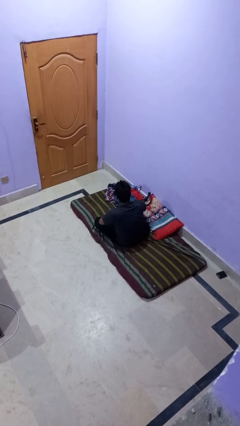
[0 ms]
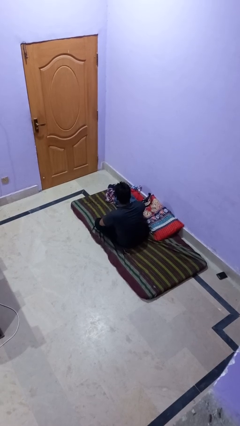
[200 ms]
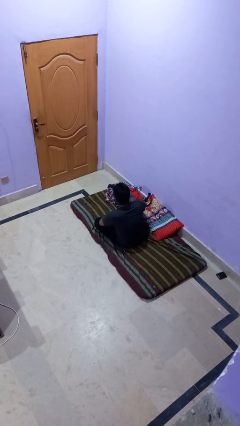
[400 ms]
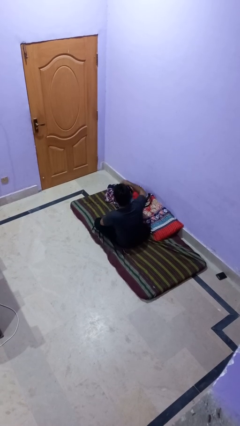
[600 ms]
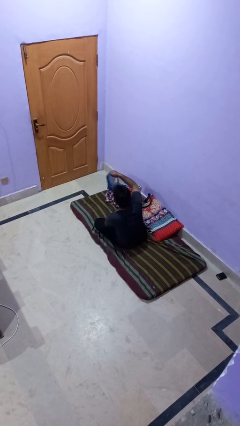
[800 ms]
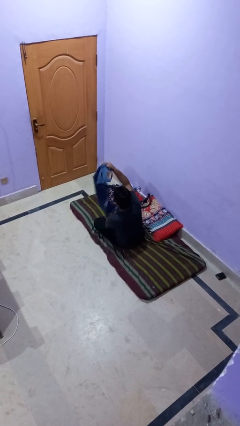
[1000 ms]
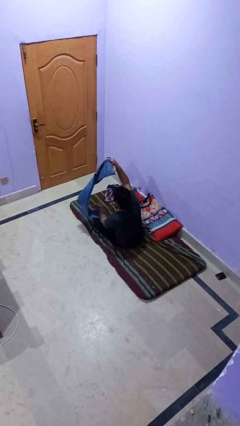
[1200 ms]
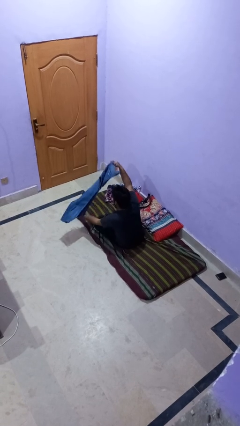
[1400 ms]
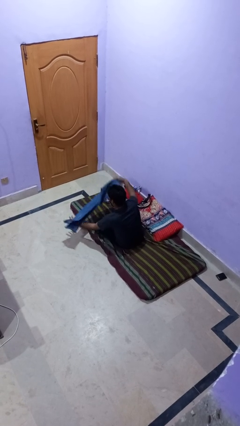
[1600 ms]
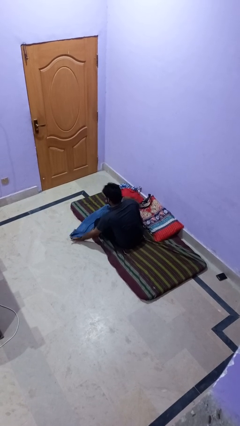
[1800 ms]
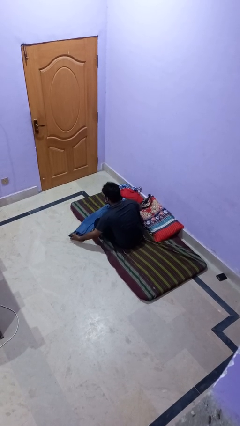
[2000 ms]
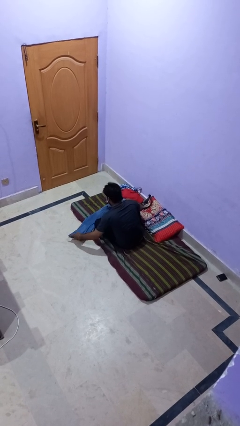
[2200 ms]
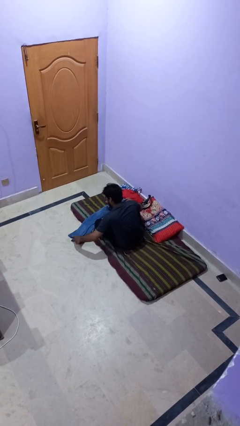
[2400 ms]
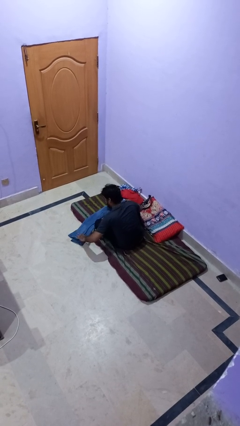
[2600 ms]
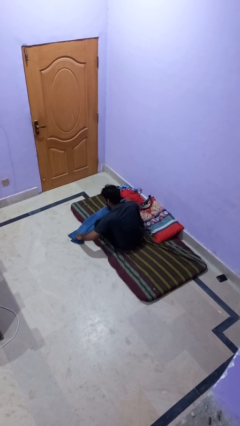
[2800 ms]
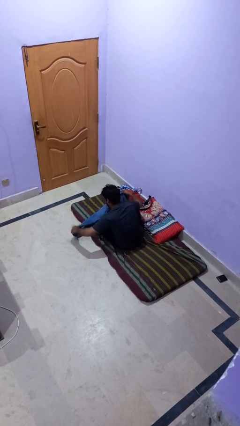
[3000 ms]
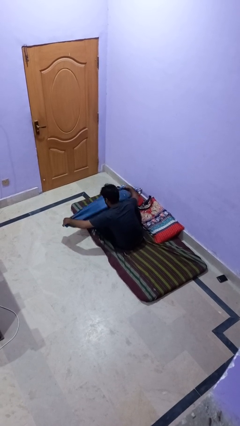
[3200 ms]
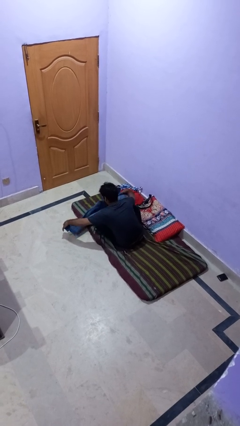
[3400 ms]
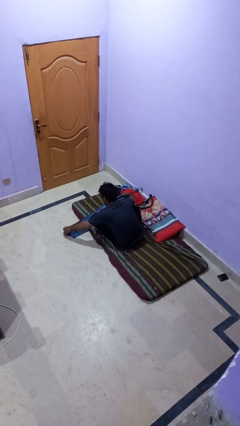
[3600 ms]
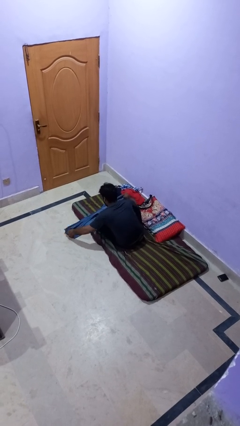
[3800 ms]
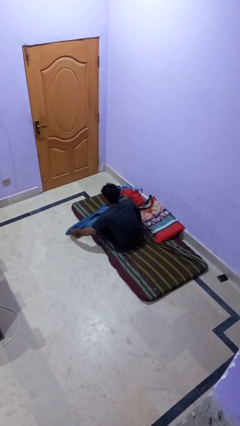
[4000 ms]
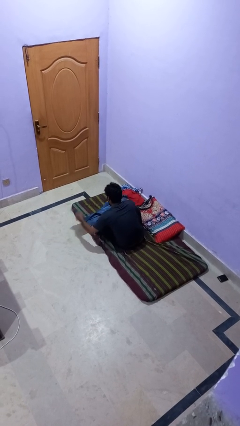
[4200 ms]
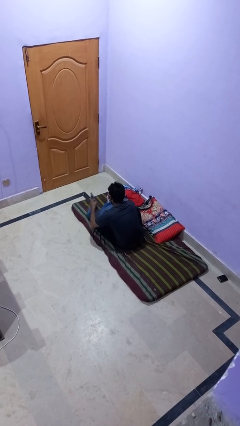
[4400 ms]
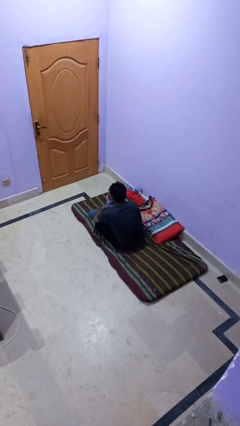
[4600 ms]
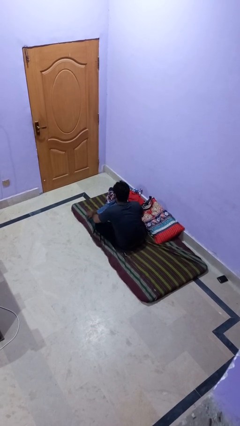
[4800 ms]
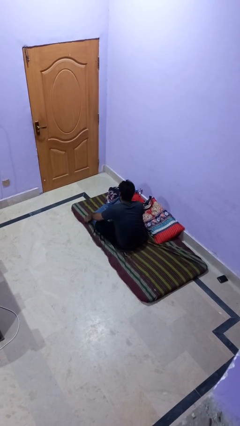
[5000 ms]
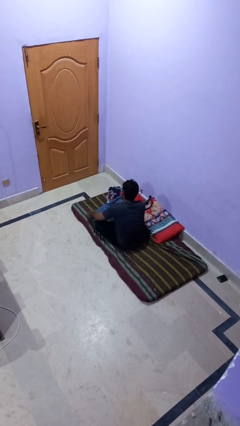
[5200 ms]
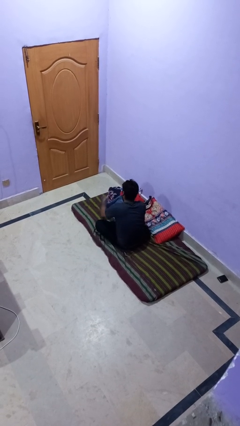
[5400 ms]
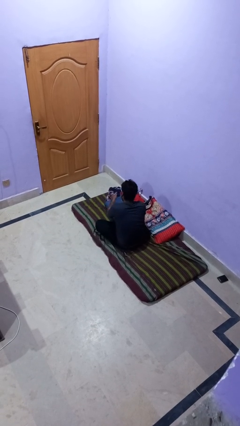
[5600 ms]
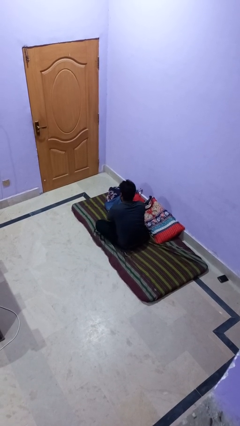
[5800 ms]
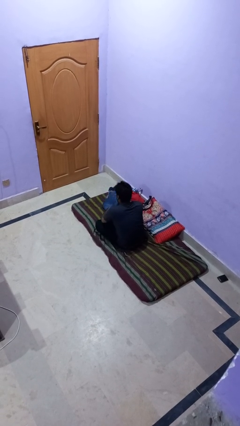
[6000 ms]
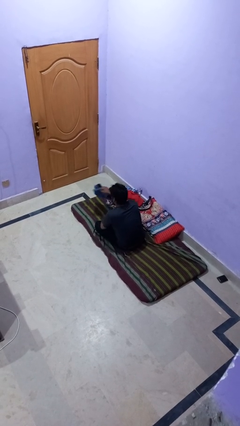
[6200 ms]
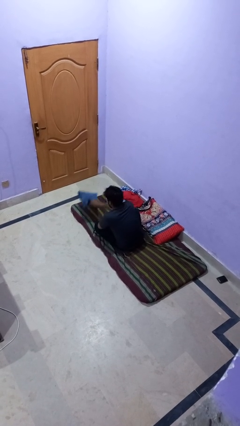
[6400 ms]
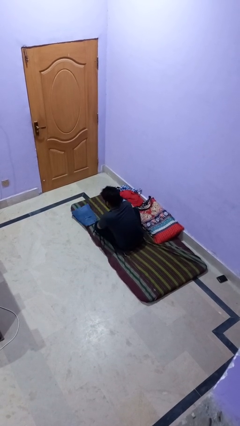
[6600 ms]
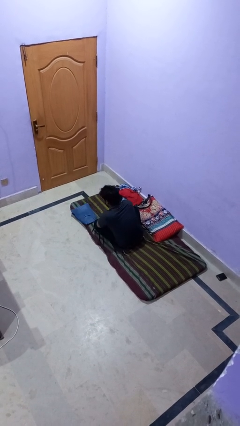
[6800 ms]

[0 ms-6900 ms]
person folds pants

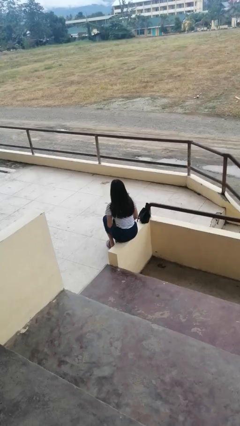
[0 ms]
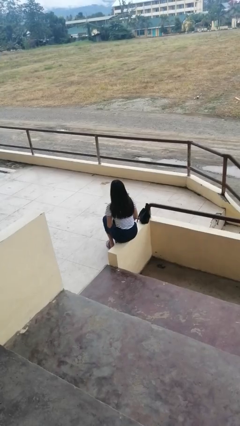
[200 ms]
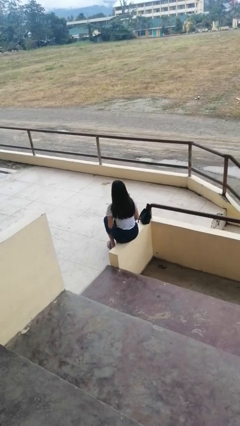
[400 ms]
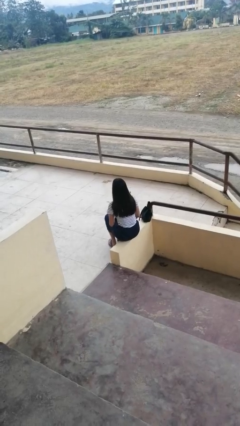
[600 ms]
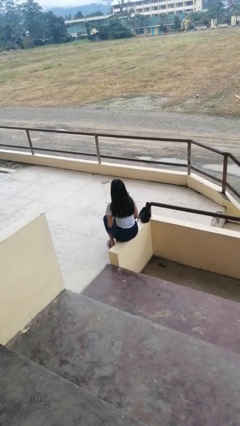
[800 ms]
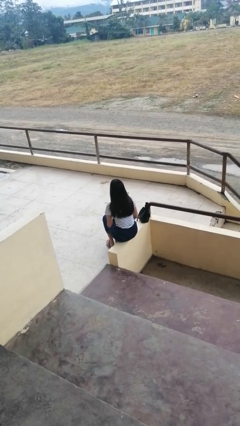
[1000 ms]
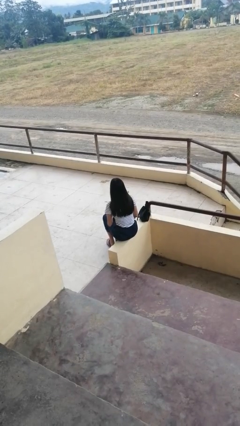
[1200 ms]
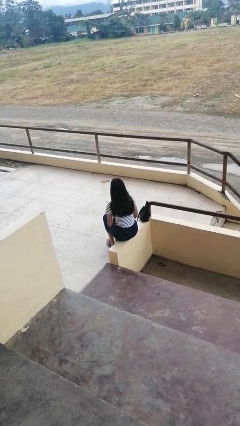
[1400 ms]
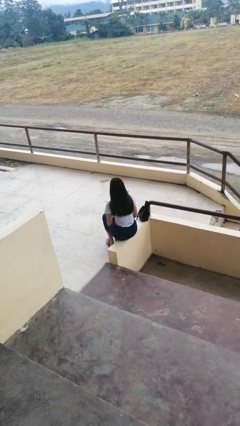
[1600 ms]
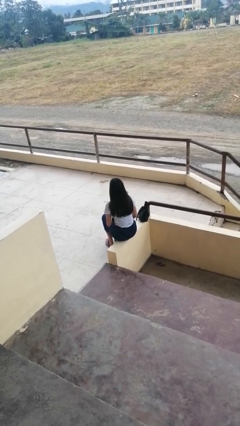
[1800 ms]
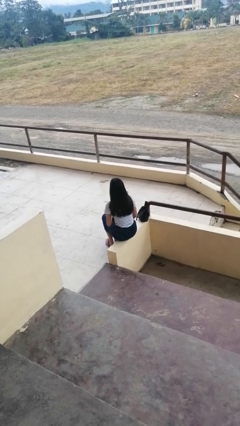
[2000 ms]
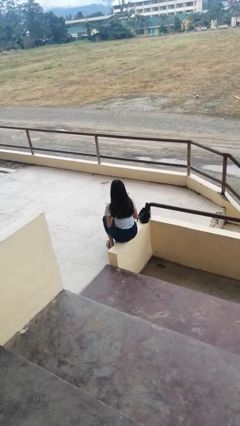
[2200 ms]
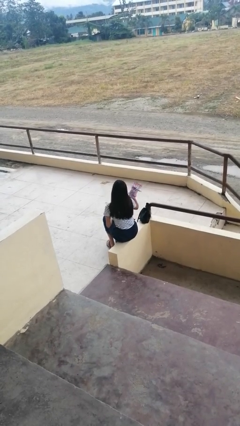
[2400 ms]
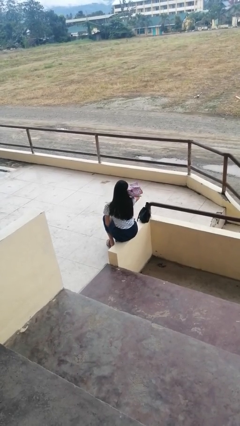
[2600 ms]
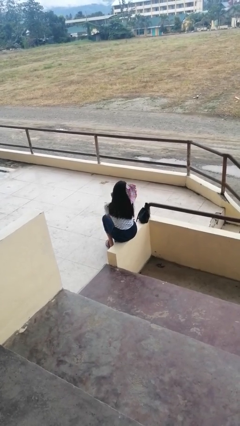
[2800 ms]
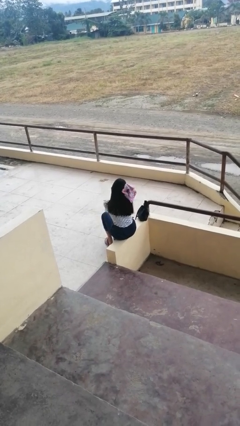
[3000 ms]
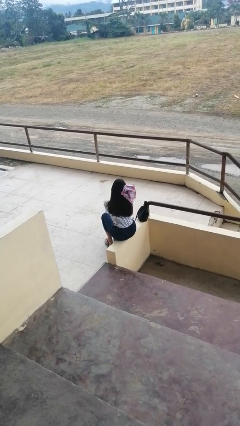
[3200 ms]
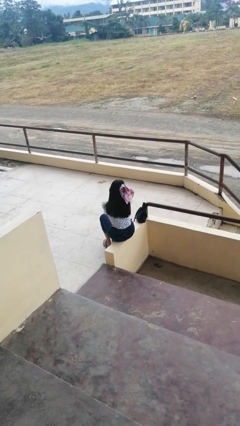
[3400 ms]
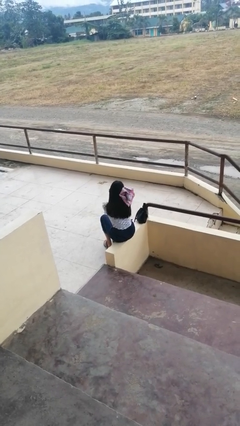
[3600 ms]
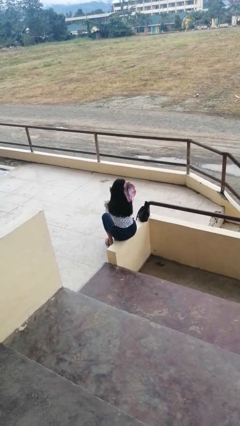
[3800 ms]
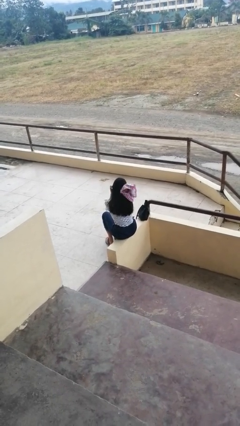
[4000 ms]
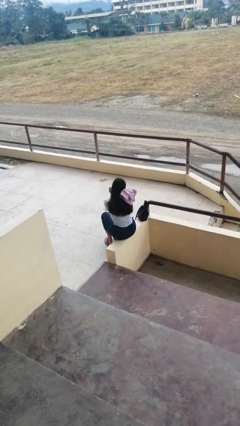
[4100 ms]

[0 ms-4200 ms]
person dries hair with towel

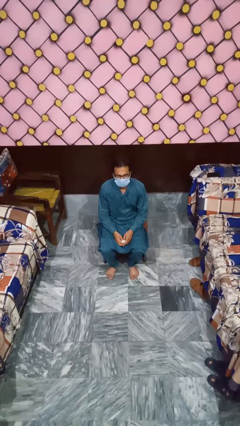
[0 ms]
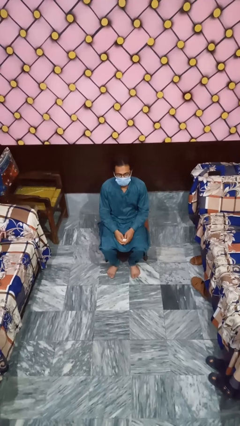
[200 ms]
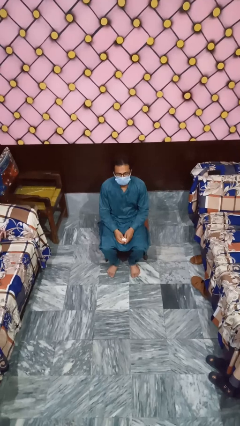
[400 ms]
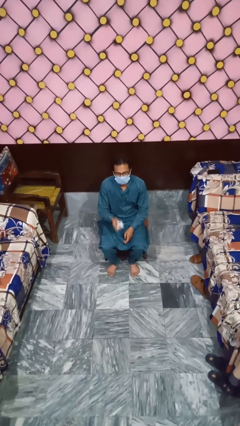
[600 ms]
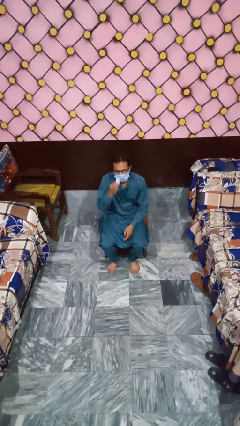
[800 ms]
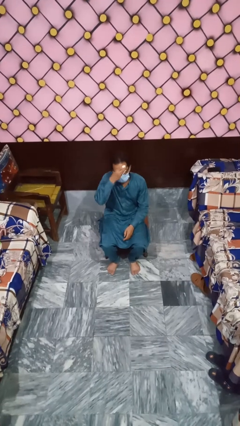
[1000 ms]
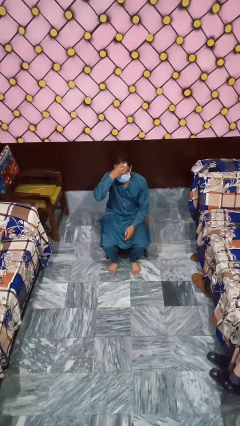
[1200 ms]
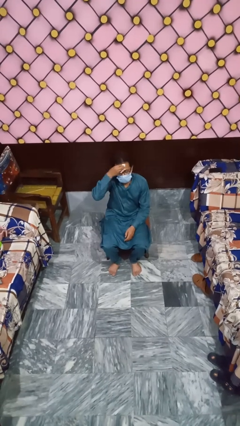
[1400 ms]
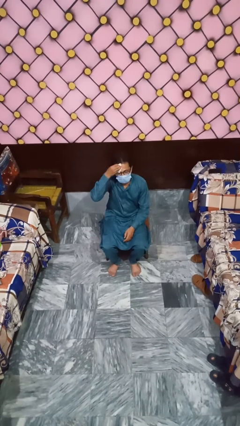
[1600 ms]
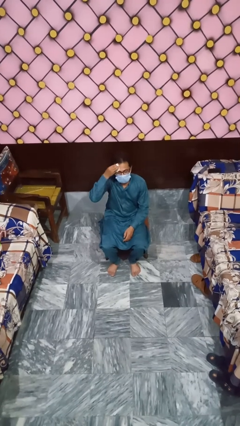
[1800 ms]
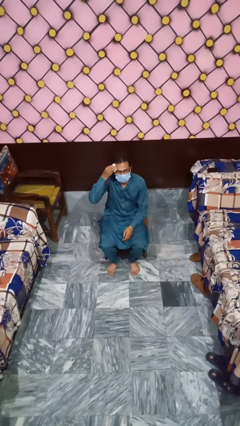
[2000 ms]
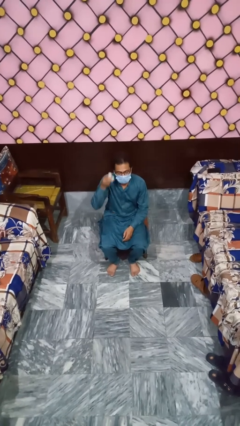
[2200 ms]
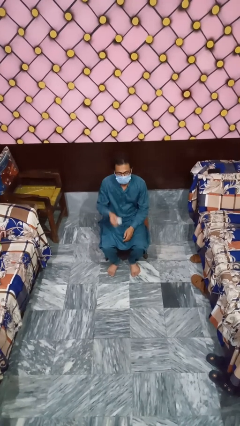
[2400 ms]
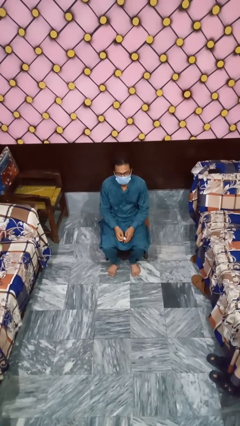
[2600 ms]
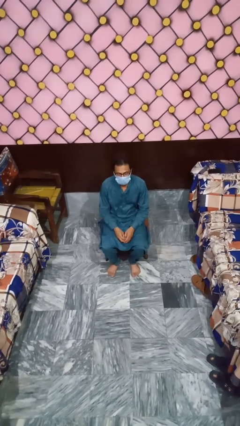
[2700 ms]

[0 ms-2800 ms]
person wipes mouth with napkin

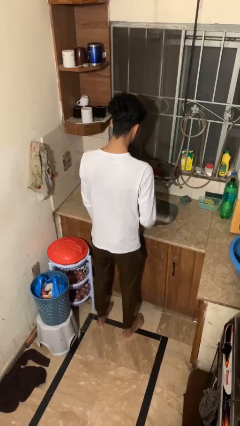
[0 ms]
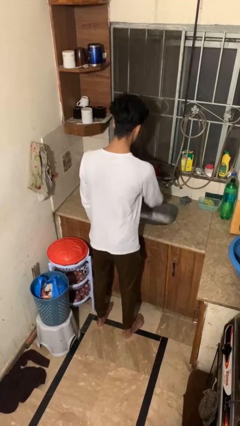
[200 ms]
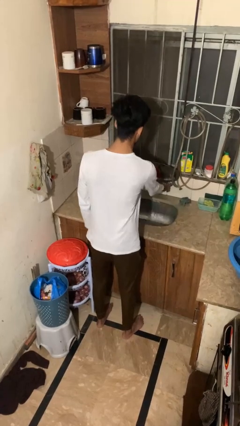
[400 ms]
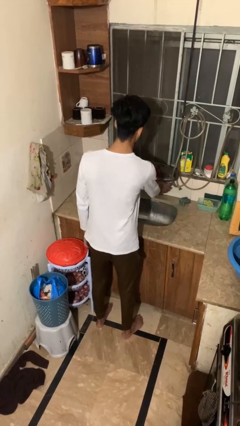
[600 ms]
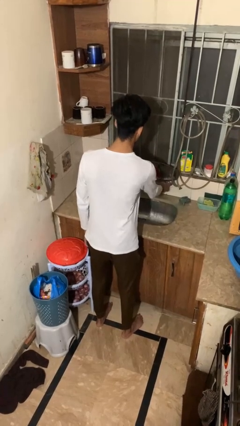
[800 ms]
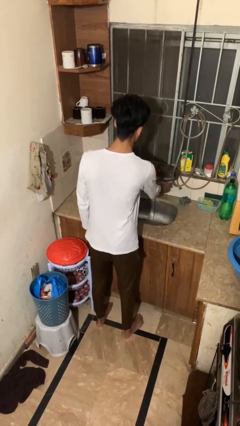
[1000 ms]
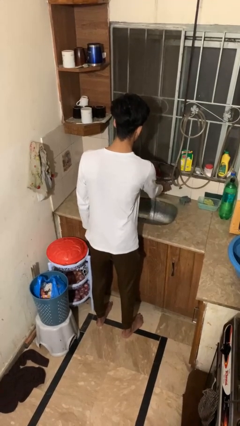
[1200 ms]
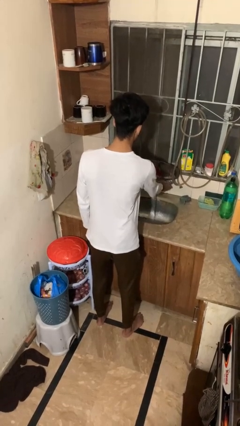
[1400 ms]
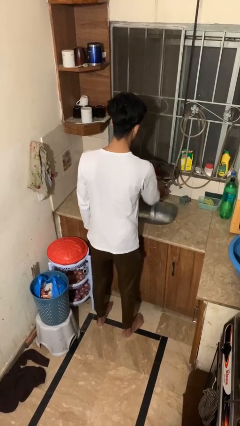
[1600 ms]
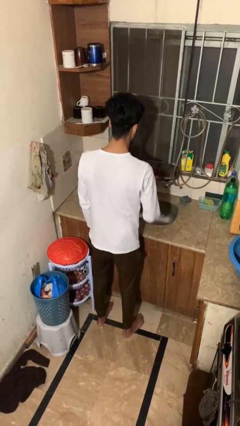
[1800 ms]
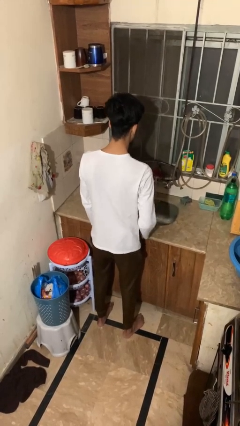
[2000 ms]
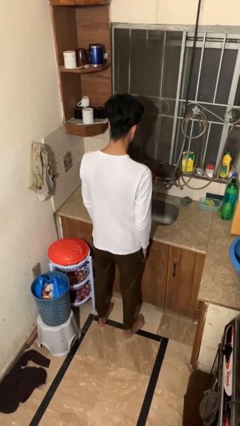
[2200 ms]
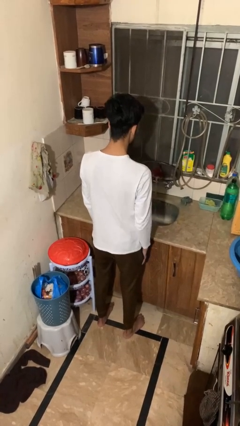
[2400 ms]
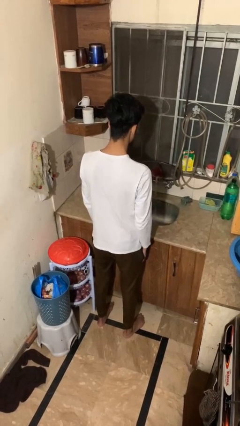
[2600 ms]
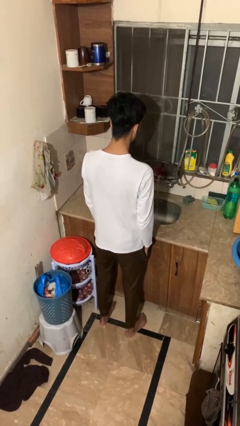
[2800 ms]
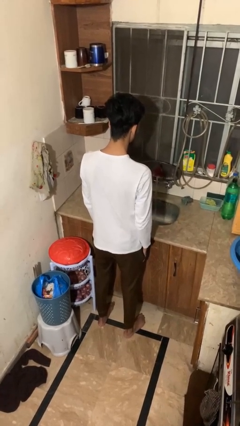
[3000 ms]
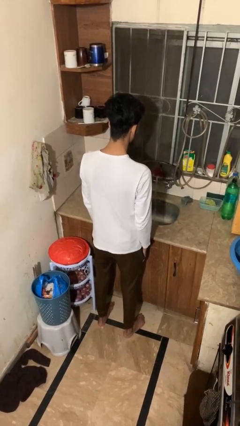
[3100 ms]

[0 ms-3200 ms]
person turns on faucet

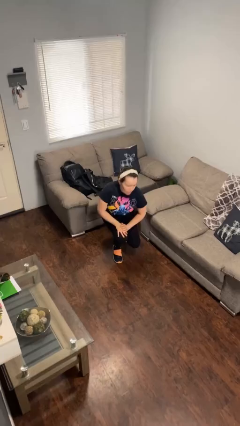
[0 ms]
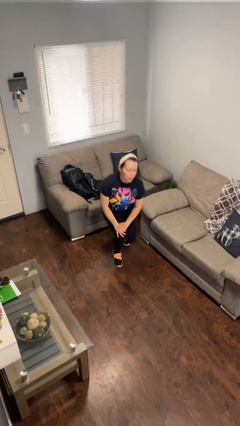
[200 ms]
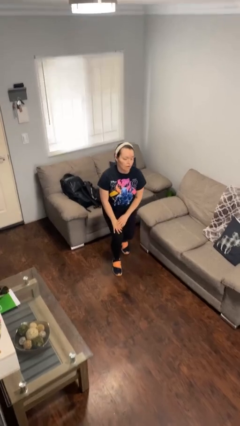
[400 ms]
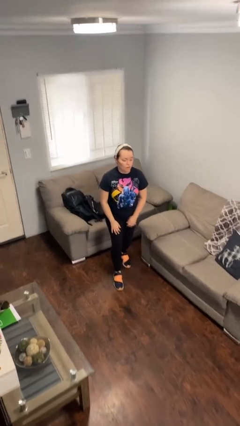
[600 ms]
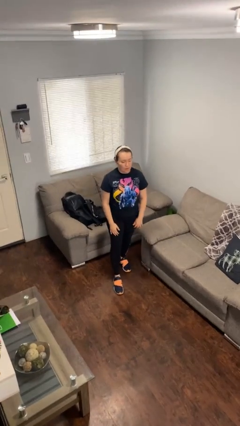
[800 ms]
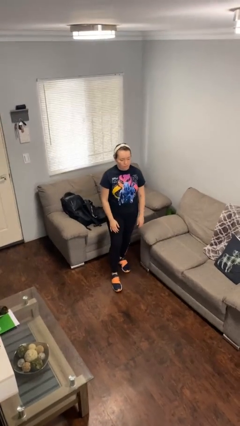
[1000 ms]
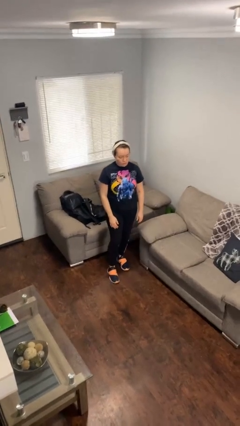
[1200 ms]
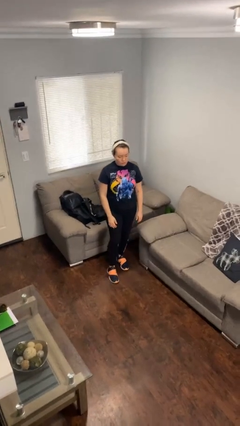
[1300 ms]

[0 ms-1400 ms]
person stands up from floor
